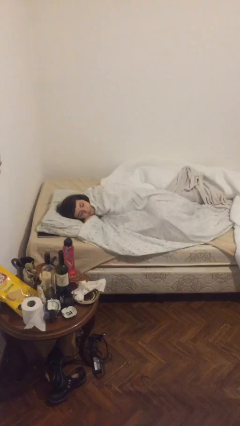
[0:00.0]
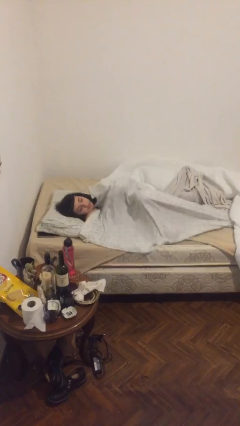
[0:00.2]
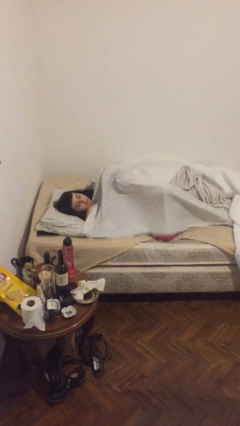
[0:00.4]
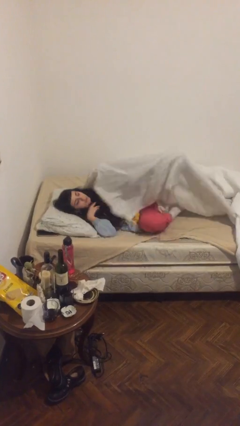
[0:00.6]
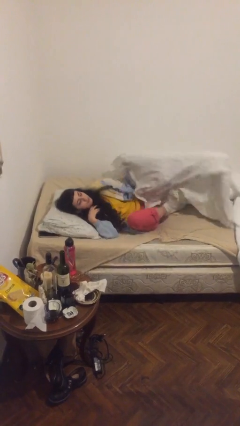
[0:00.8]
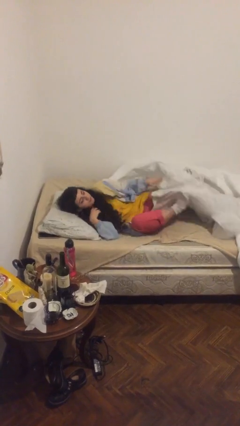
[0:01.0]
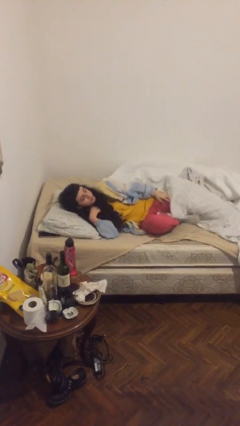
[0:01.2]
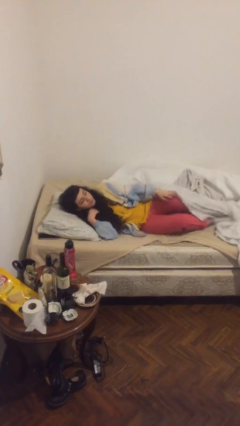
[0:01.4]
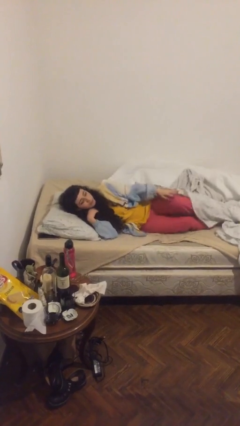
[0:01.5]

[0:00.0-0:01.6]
person uncovers with bedsheets

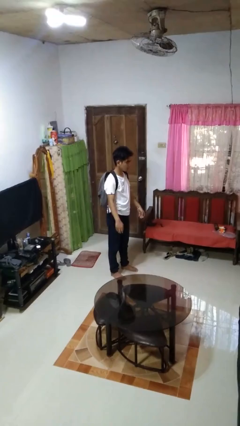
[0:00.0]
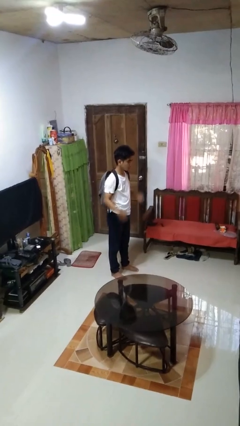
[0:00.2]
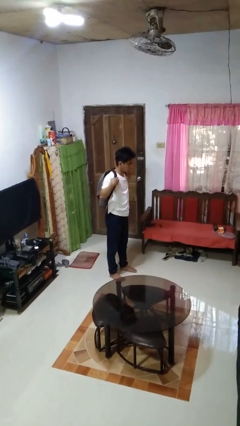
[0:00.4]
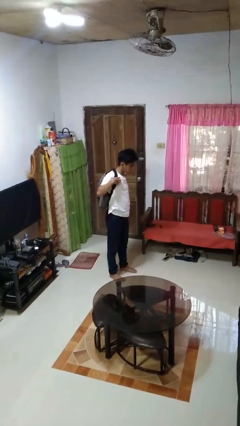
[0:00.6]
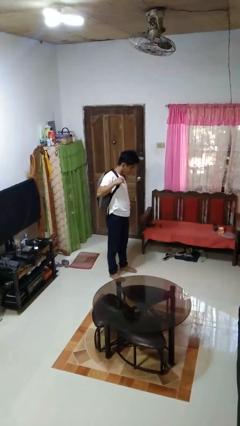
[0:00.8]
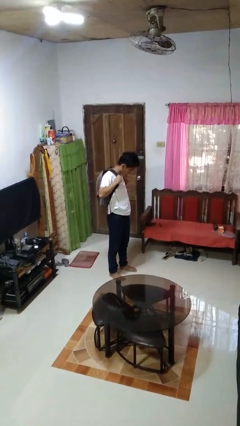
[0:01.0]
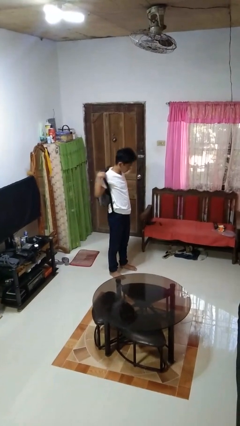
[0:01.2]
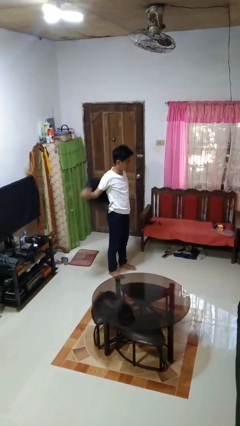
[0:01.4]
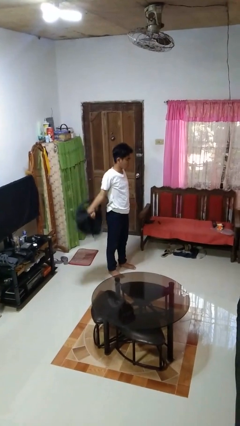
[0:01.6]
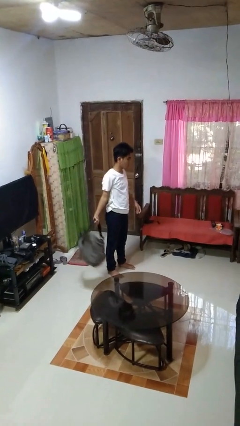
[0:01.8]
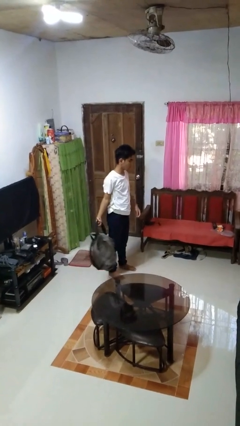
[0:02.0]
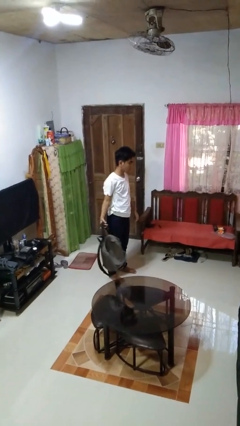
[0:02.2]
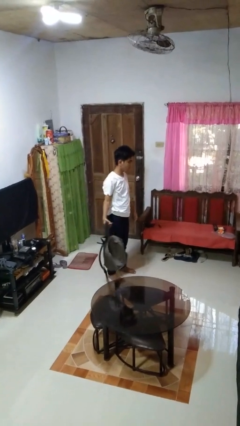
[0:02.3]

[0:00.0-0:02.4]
person takes off backpack

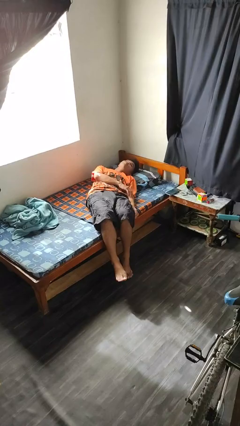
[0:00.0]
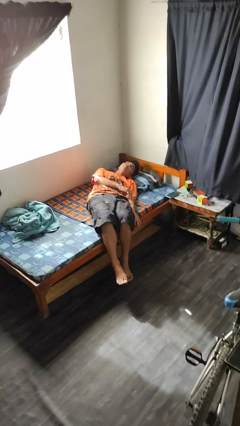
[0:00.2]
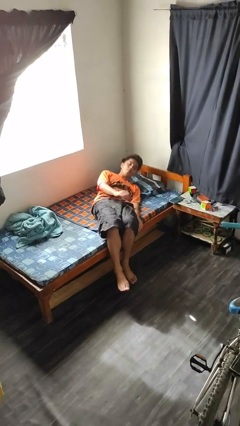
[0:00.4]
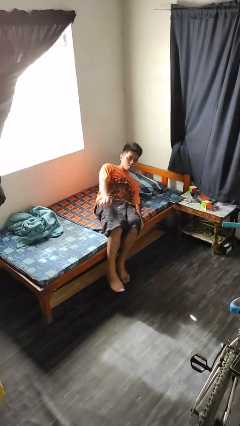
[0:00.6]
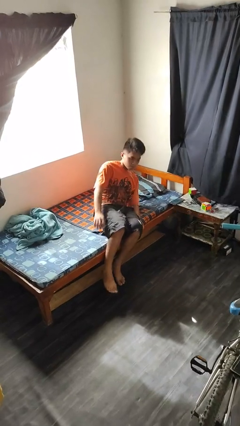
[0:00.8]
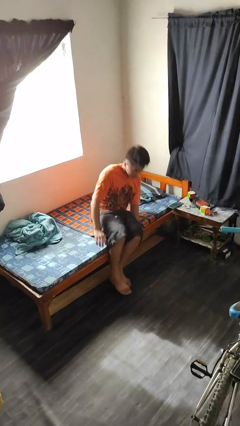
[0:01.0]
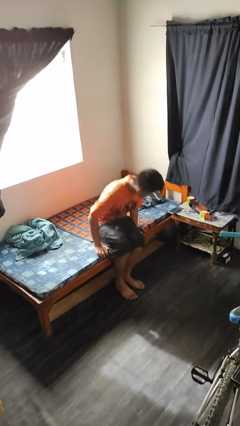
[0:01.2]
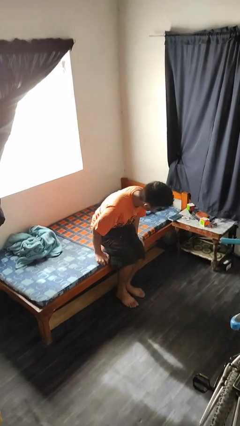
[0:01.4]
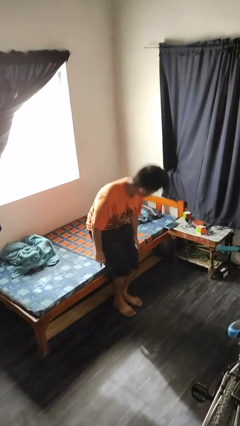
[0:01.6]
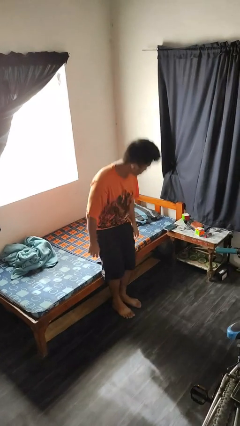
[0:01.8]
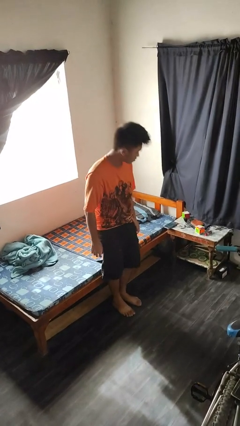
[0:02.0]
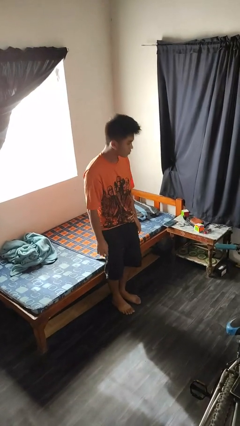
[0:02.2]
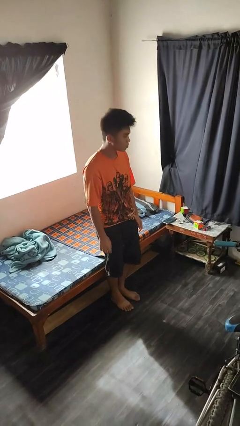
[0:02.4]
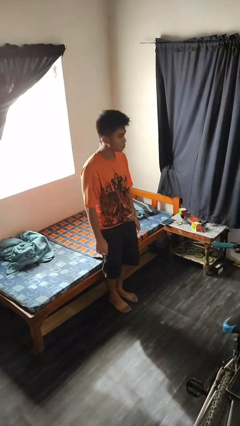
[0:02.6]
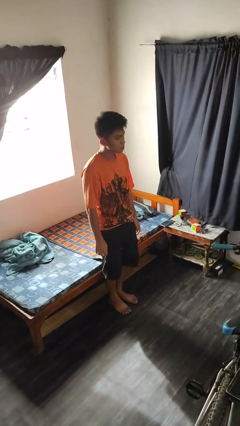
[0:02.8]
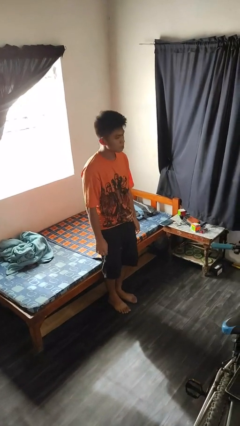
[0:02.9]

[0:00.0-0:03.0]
person stands up

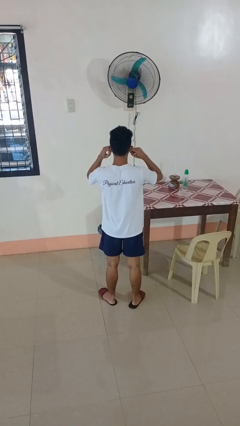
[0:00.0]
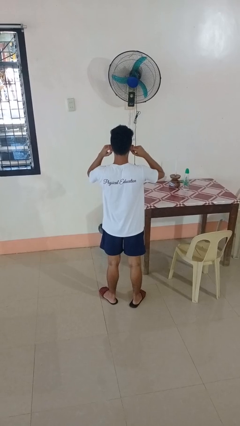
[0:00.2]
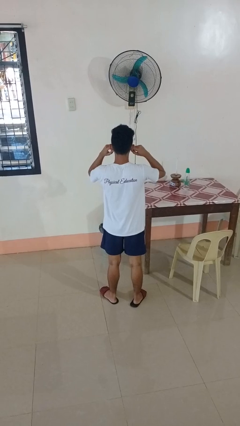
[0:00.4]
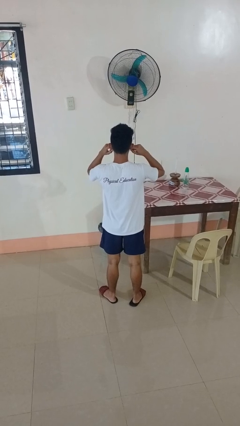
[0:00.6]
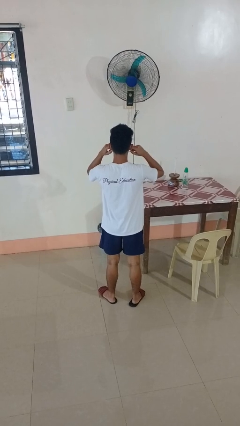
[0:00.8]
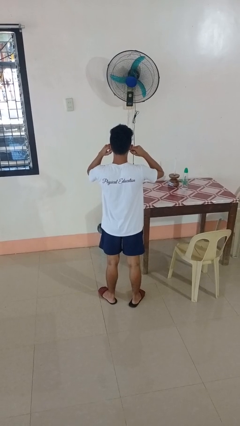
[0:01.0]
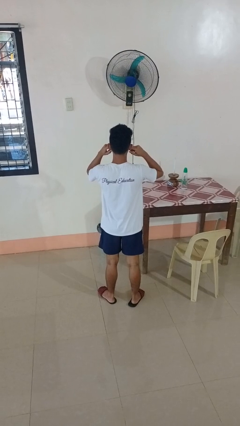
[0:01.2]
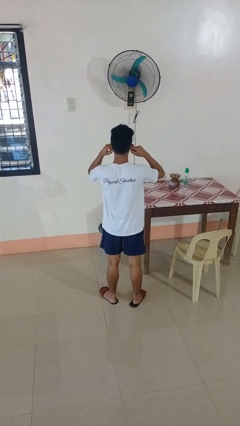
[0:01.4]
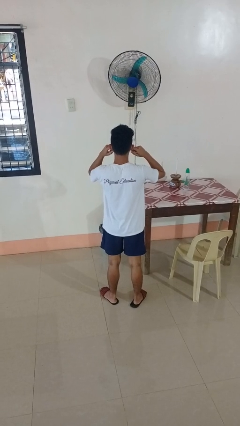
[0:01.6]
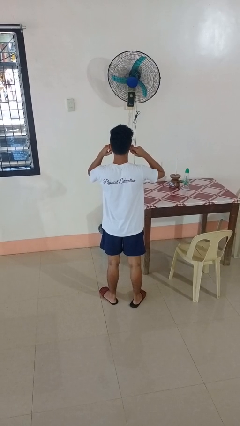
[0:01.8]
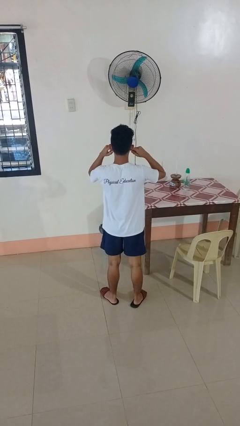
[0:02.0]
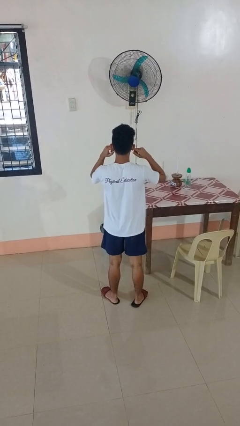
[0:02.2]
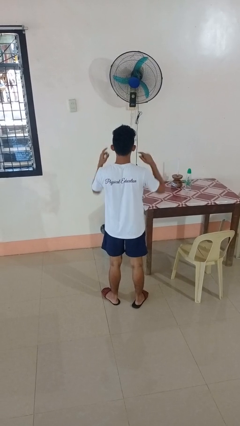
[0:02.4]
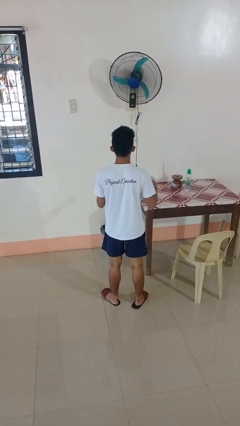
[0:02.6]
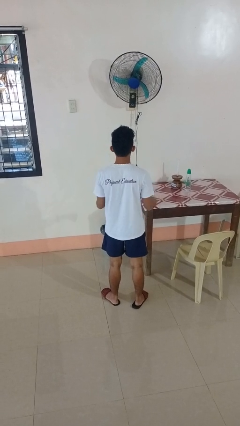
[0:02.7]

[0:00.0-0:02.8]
person puts fingers in ear

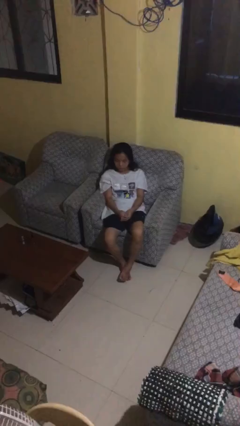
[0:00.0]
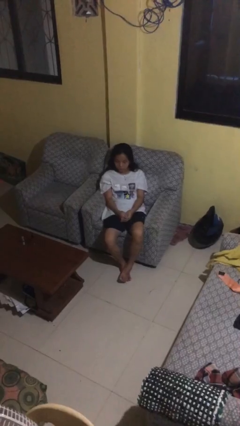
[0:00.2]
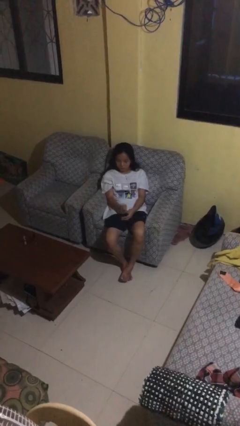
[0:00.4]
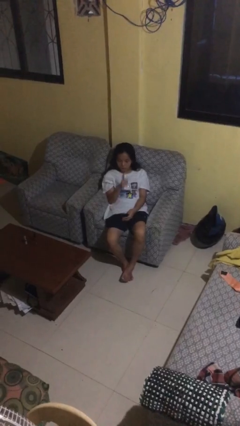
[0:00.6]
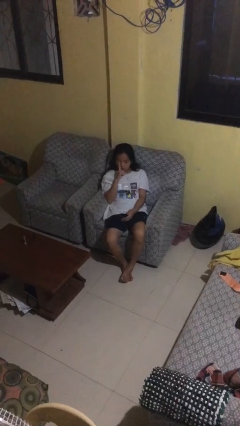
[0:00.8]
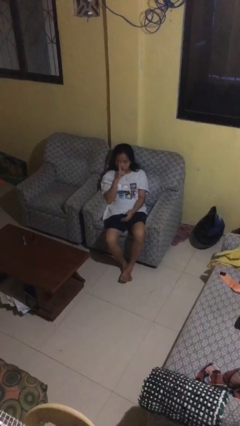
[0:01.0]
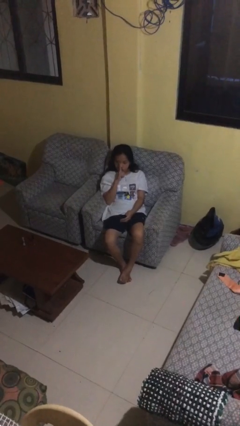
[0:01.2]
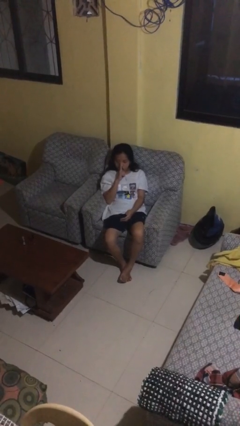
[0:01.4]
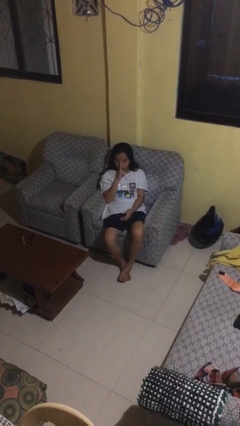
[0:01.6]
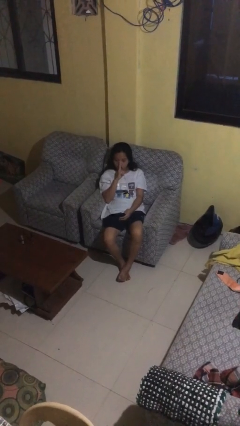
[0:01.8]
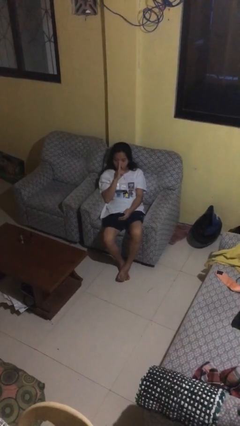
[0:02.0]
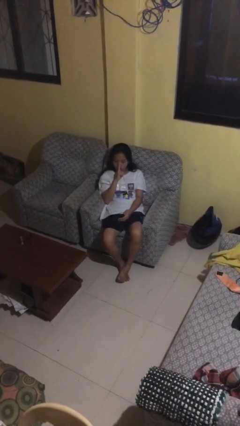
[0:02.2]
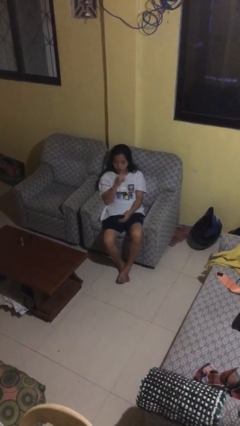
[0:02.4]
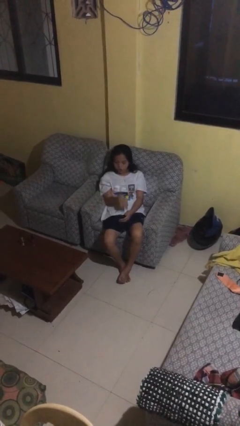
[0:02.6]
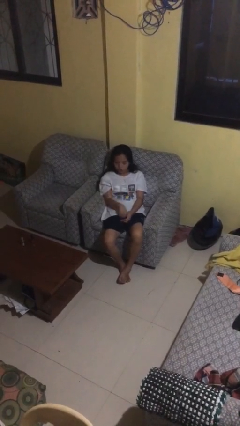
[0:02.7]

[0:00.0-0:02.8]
person gestures be quiet

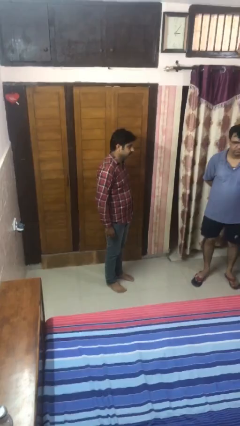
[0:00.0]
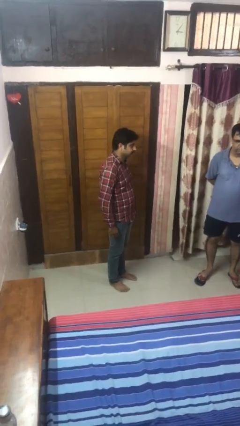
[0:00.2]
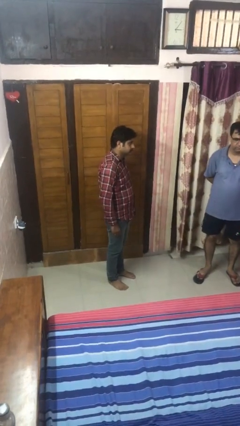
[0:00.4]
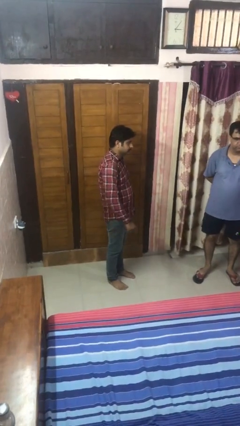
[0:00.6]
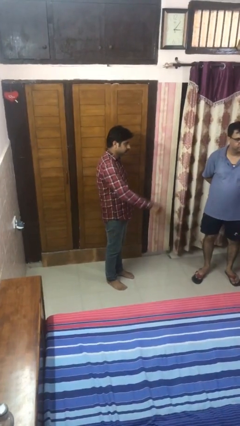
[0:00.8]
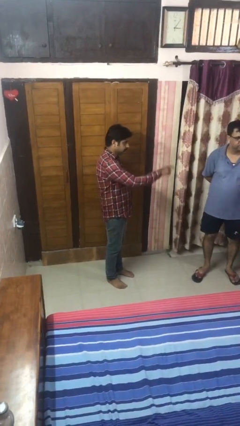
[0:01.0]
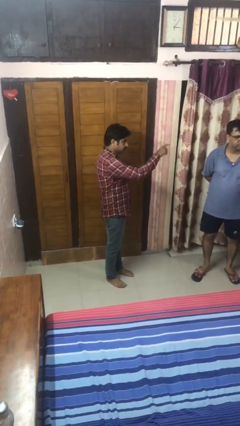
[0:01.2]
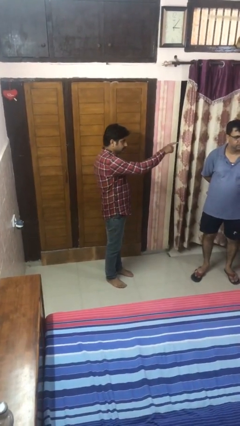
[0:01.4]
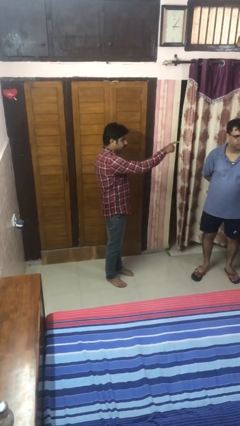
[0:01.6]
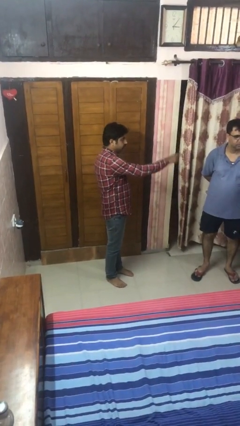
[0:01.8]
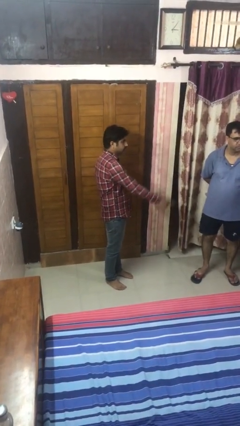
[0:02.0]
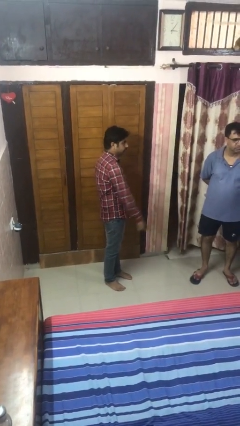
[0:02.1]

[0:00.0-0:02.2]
person points at person

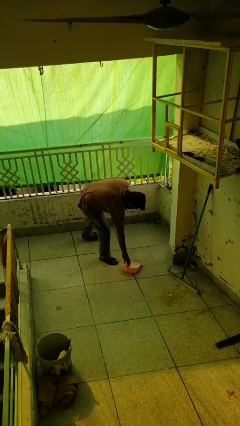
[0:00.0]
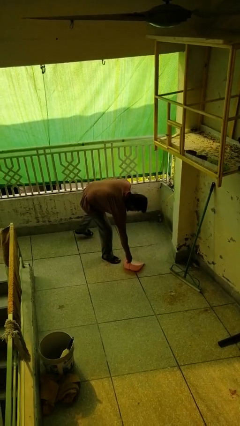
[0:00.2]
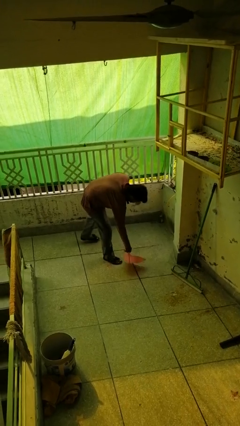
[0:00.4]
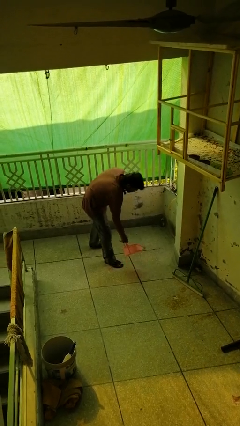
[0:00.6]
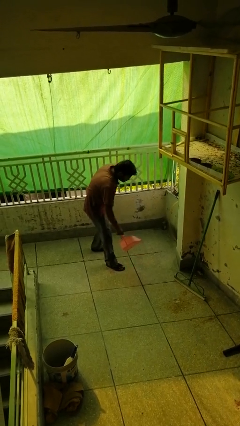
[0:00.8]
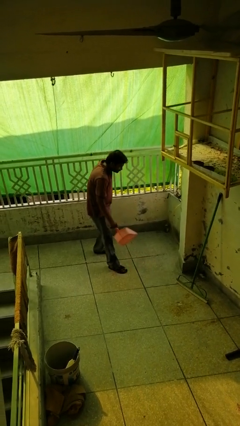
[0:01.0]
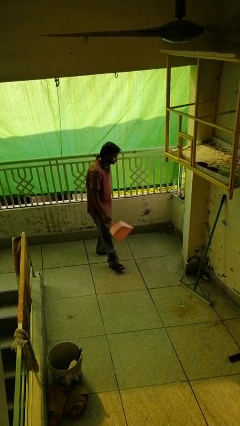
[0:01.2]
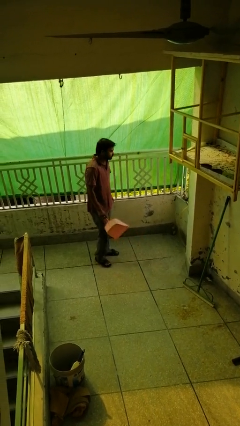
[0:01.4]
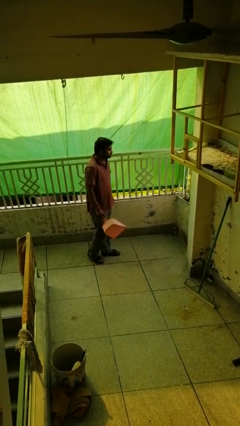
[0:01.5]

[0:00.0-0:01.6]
person picks up object from floor

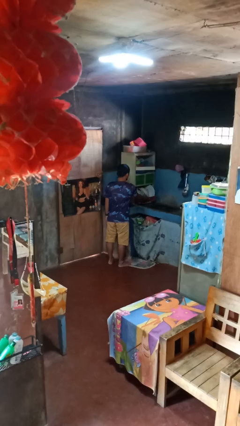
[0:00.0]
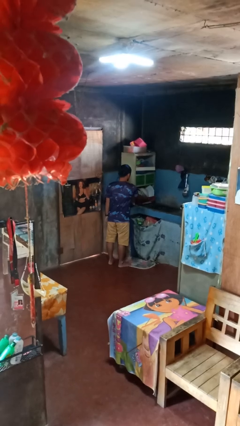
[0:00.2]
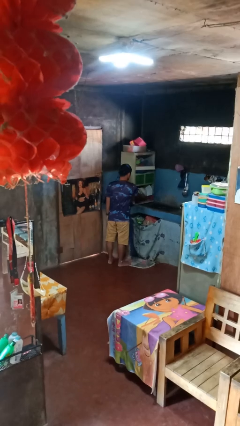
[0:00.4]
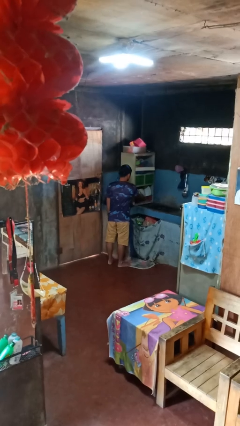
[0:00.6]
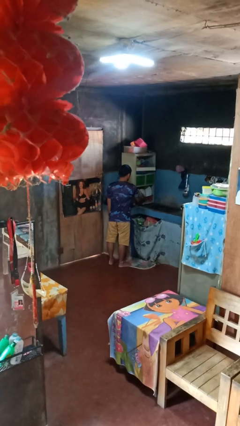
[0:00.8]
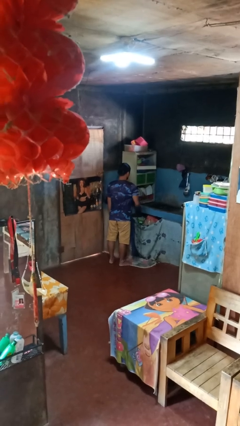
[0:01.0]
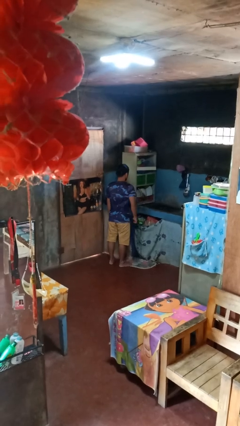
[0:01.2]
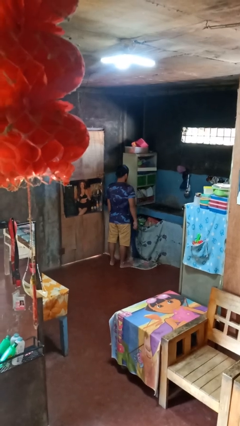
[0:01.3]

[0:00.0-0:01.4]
person closes dishwasher
